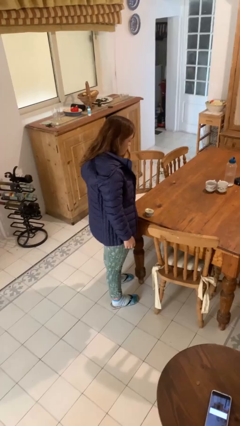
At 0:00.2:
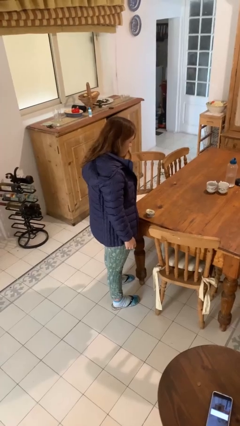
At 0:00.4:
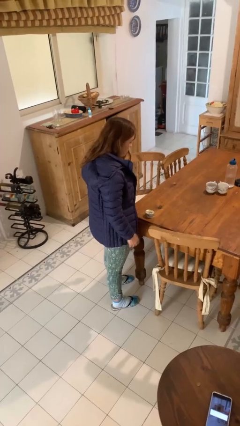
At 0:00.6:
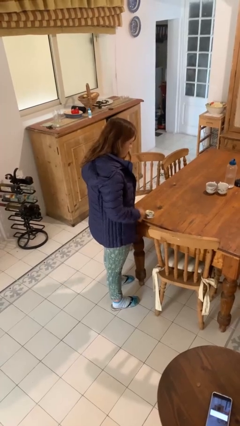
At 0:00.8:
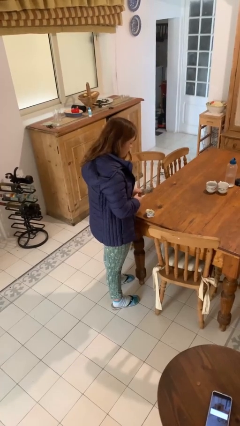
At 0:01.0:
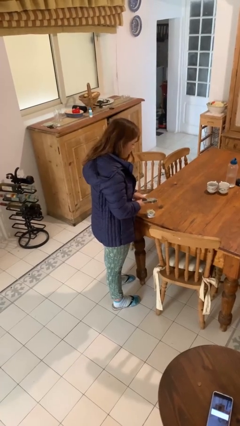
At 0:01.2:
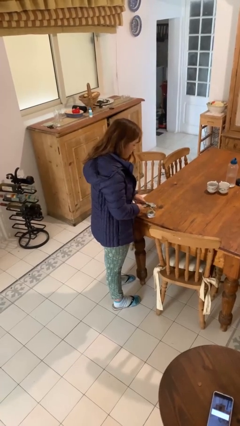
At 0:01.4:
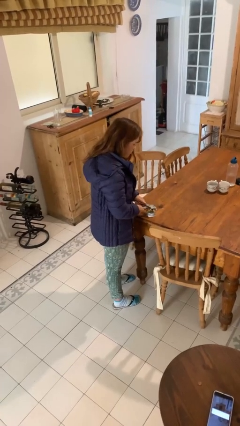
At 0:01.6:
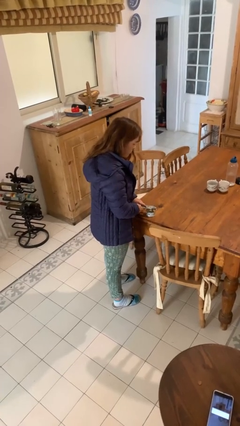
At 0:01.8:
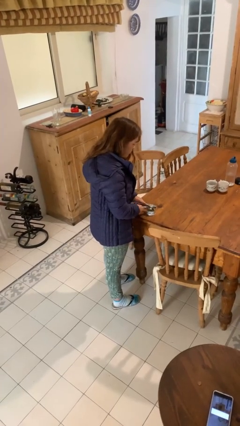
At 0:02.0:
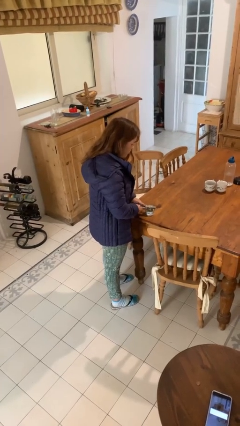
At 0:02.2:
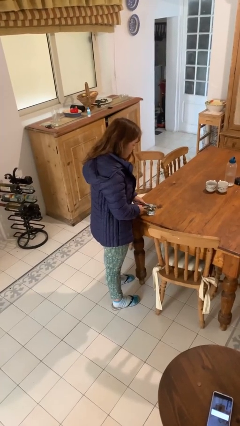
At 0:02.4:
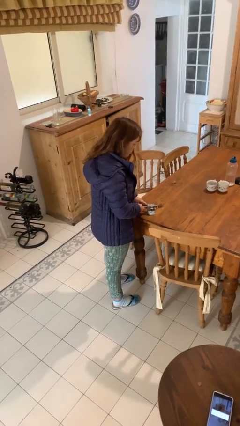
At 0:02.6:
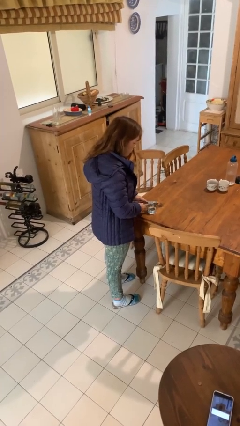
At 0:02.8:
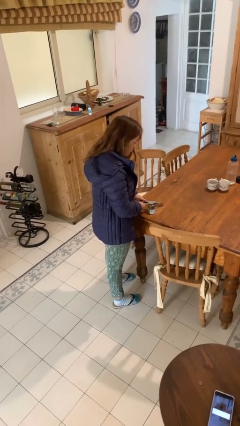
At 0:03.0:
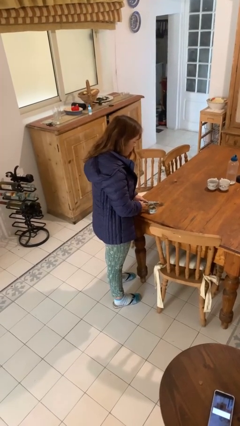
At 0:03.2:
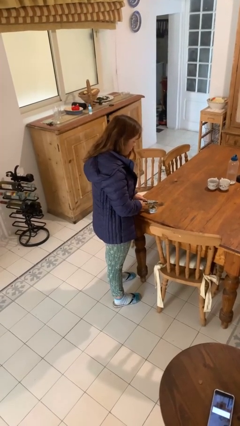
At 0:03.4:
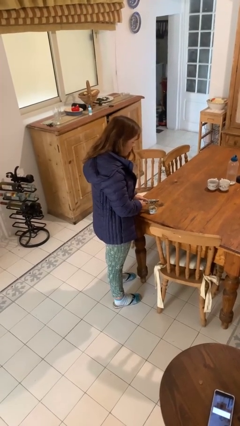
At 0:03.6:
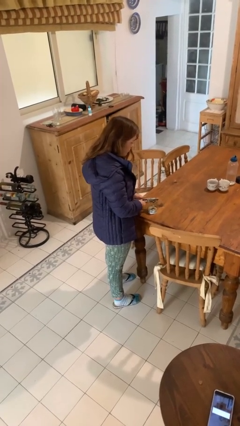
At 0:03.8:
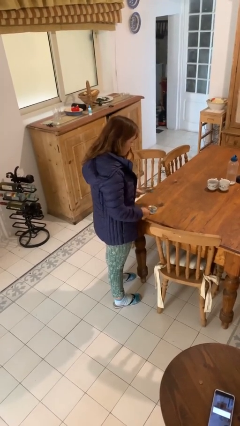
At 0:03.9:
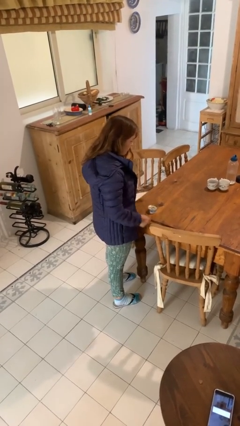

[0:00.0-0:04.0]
person opens can with can opener

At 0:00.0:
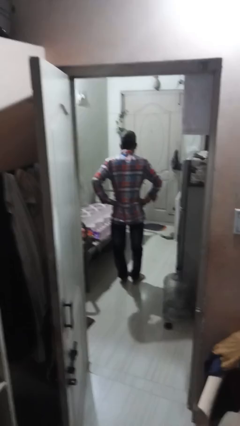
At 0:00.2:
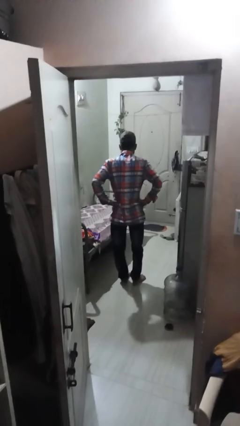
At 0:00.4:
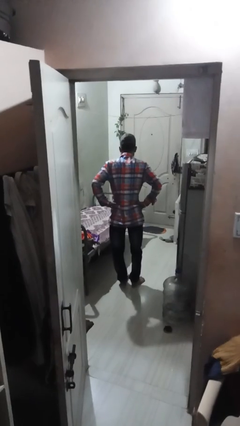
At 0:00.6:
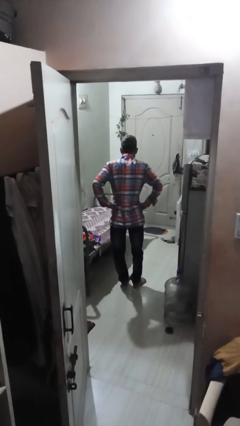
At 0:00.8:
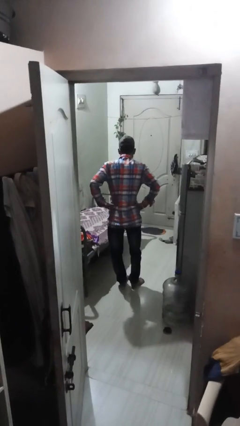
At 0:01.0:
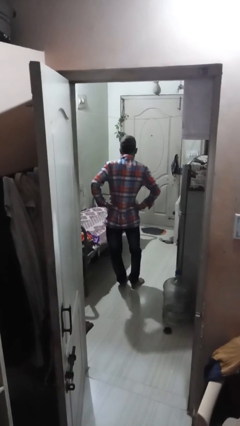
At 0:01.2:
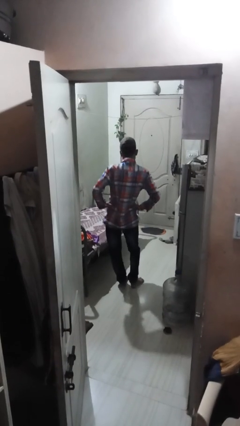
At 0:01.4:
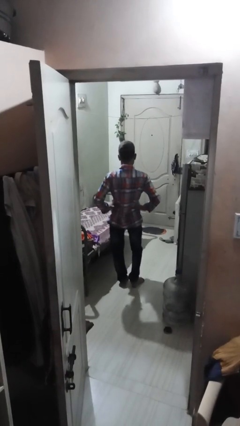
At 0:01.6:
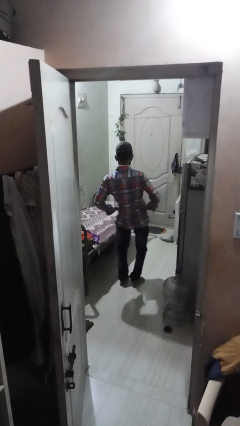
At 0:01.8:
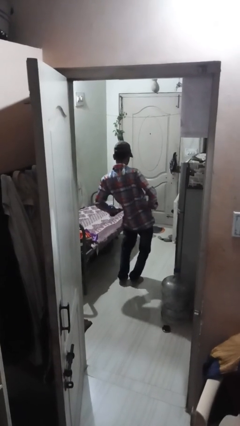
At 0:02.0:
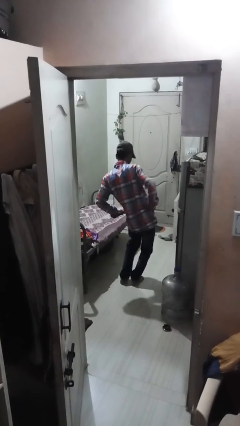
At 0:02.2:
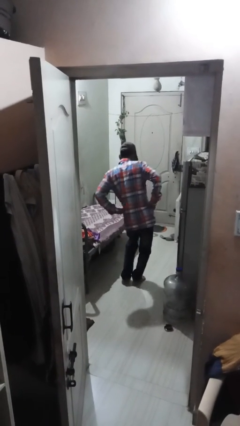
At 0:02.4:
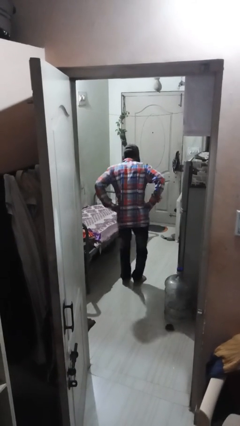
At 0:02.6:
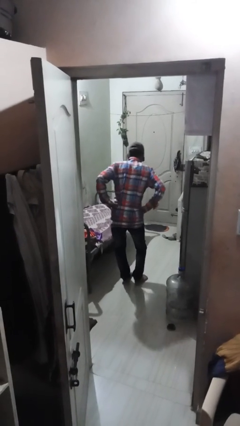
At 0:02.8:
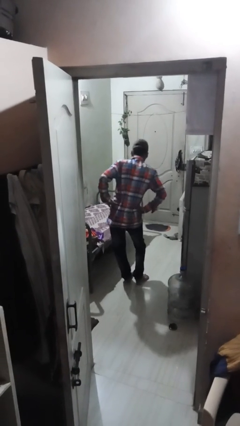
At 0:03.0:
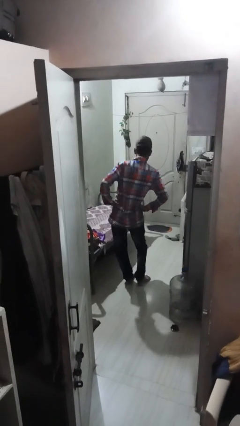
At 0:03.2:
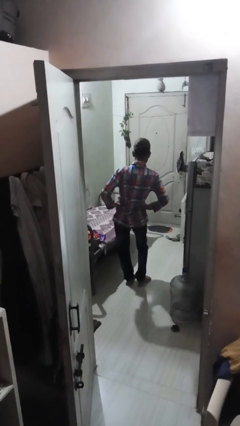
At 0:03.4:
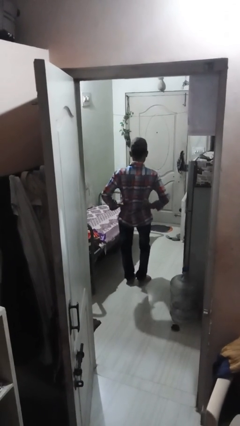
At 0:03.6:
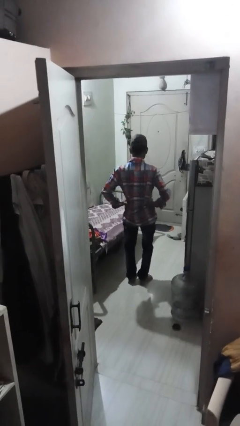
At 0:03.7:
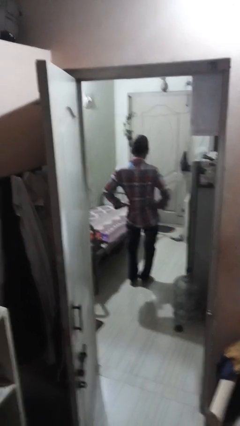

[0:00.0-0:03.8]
person wiggles hips

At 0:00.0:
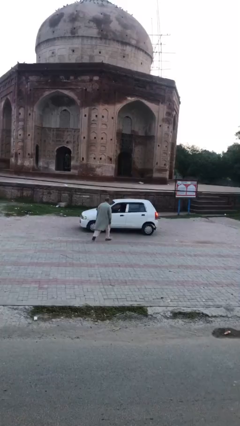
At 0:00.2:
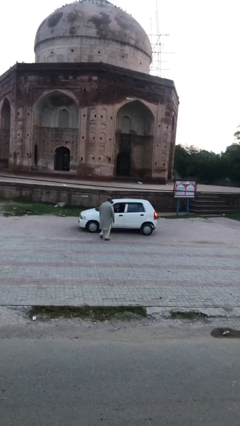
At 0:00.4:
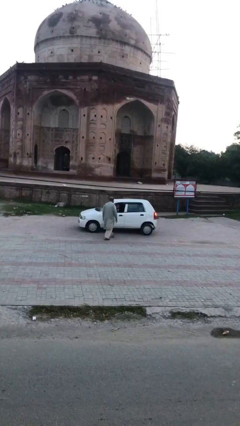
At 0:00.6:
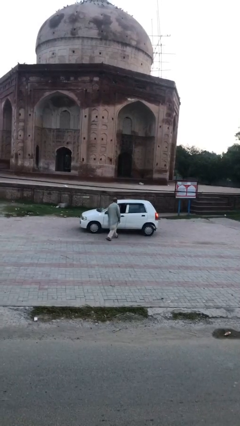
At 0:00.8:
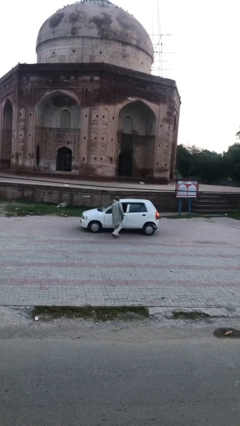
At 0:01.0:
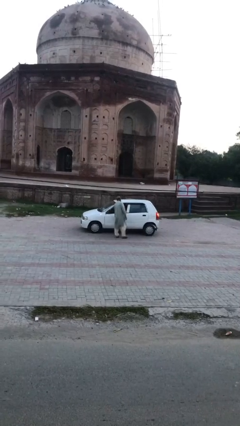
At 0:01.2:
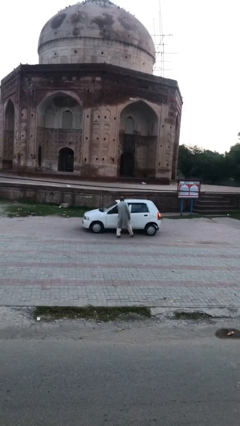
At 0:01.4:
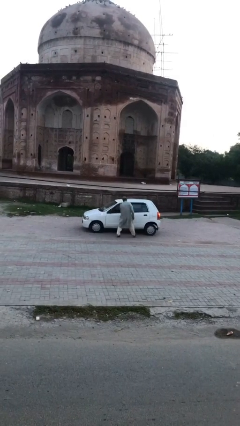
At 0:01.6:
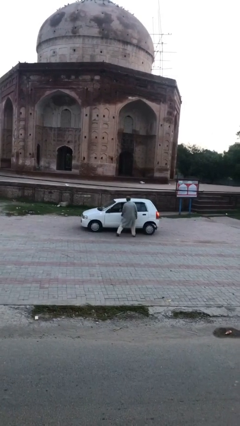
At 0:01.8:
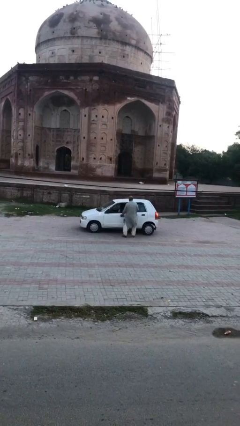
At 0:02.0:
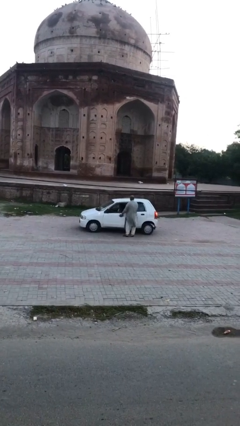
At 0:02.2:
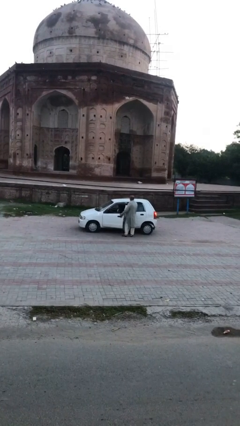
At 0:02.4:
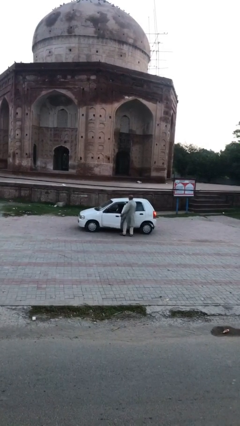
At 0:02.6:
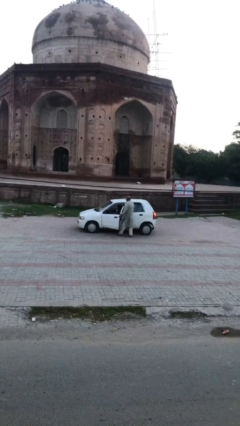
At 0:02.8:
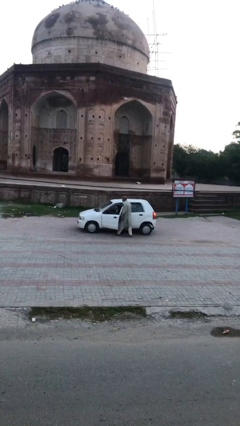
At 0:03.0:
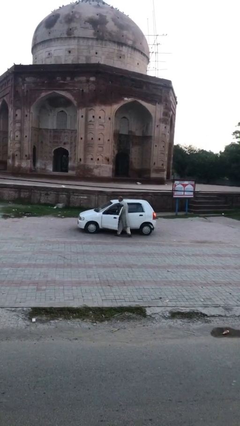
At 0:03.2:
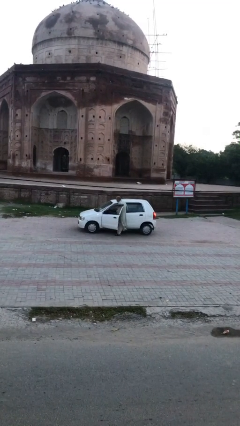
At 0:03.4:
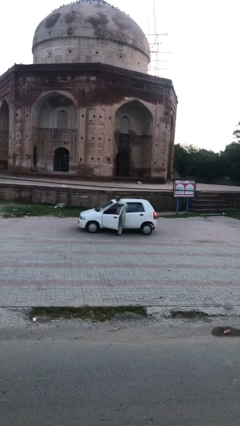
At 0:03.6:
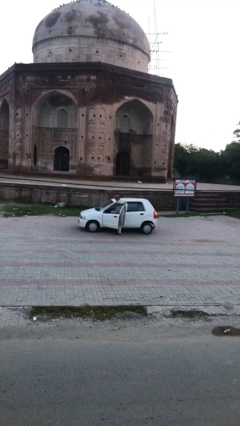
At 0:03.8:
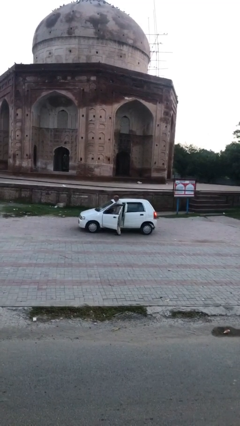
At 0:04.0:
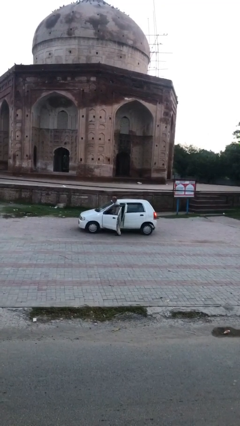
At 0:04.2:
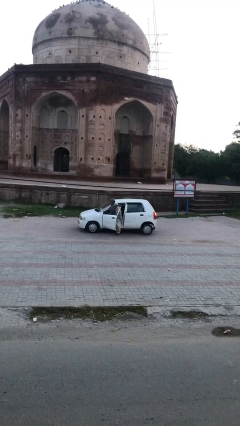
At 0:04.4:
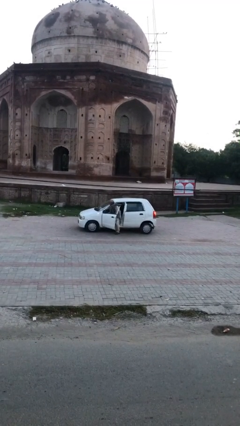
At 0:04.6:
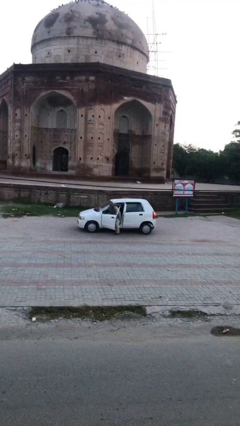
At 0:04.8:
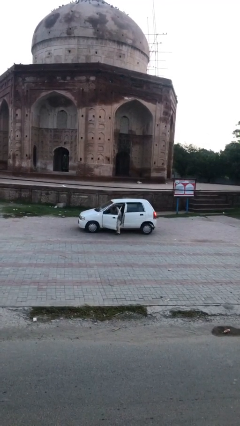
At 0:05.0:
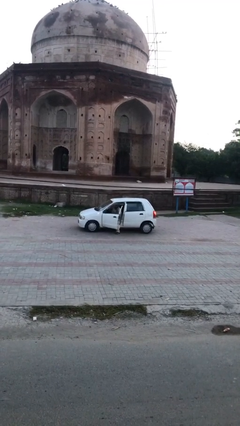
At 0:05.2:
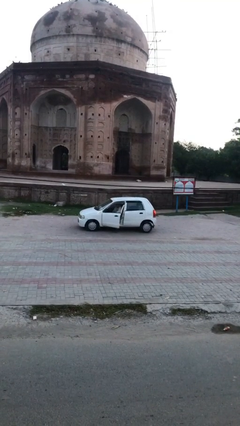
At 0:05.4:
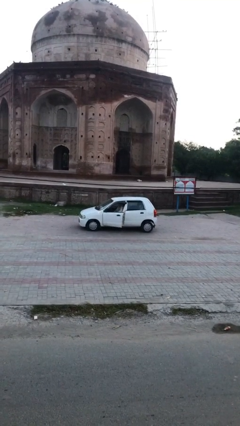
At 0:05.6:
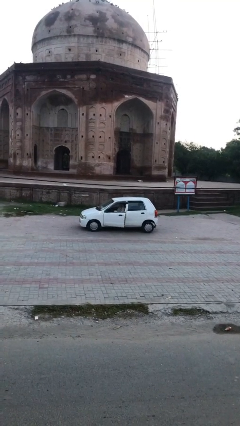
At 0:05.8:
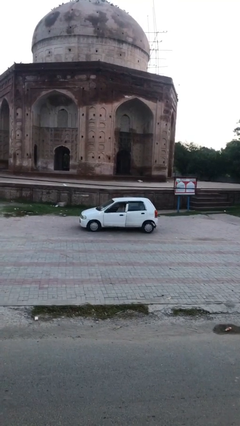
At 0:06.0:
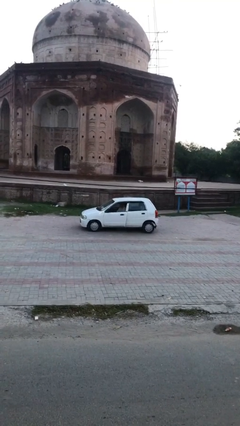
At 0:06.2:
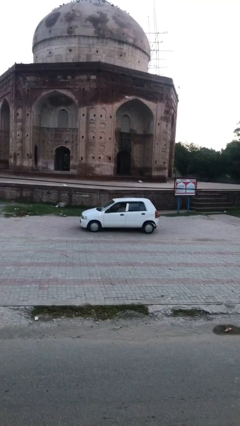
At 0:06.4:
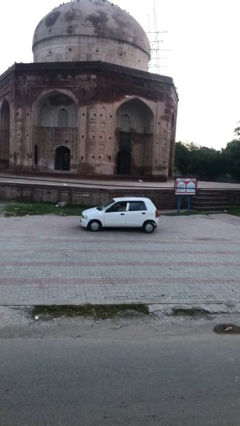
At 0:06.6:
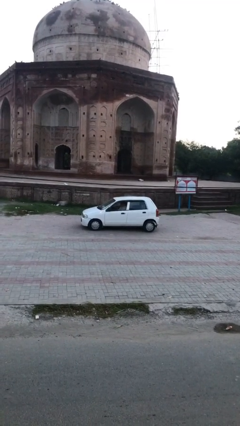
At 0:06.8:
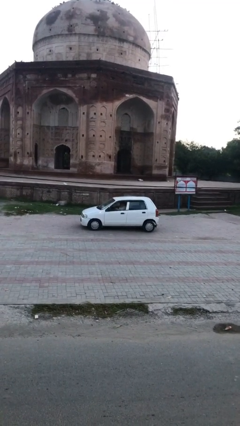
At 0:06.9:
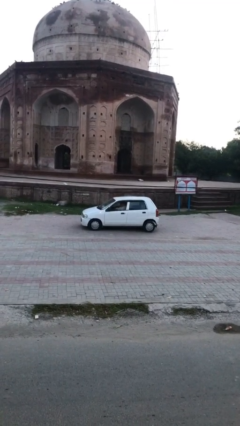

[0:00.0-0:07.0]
car picks up person

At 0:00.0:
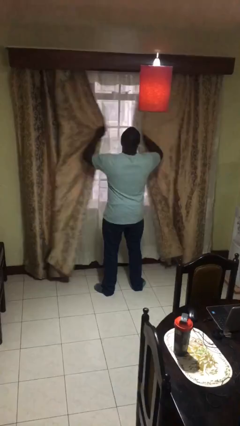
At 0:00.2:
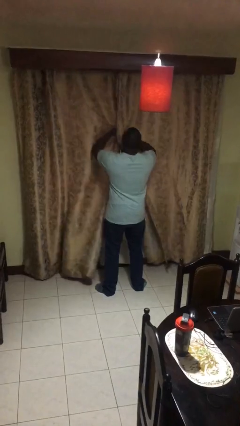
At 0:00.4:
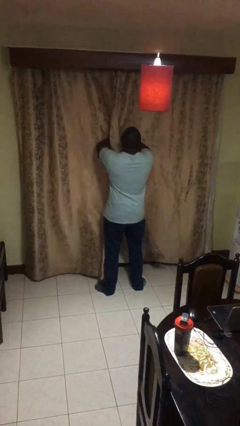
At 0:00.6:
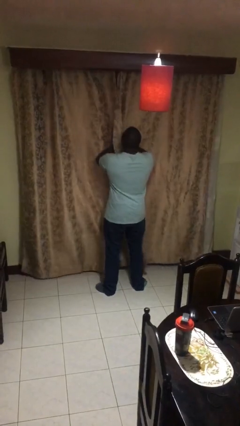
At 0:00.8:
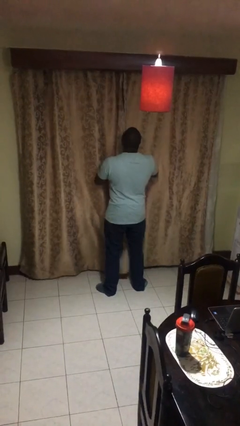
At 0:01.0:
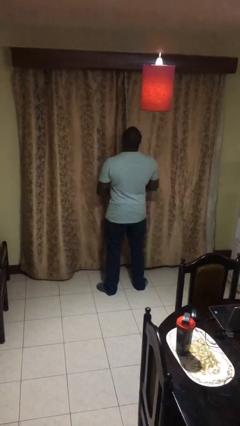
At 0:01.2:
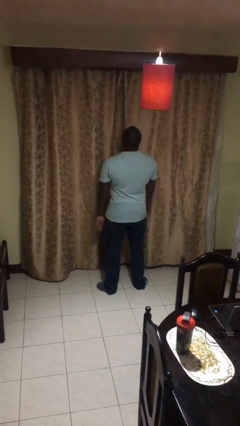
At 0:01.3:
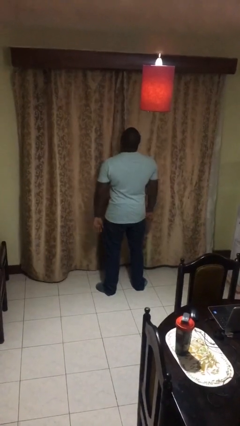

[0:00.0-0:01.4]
person closes curtains

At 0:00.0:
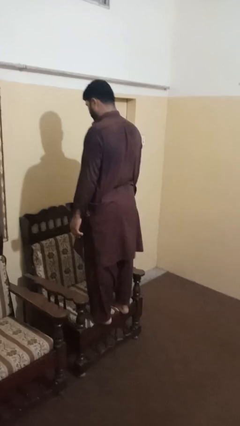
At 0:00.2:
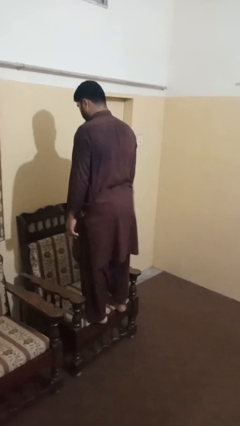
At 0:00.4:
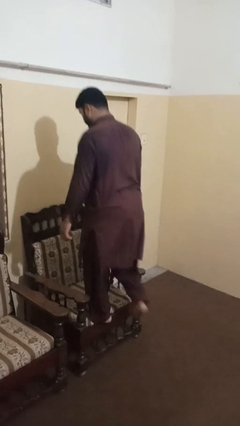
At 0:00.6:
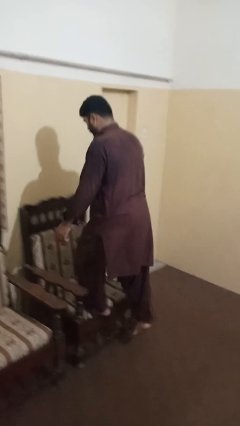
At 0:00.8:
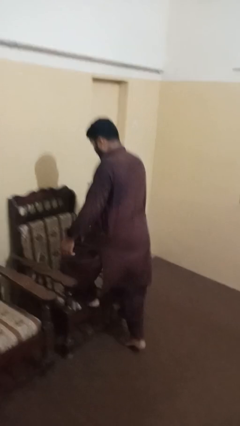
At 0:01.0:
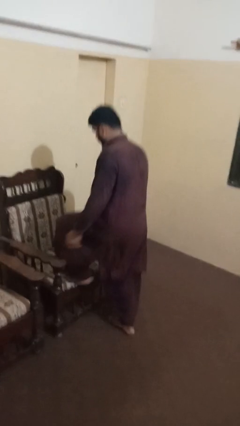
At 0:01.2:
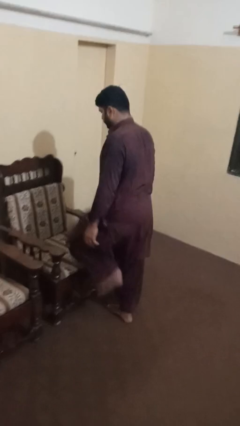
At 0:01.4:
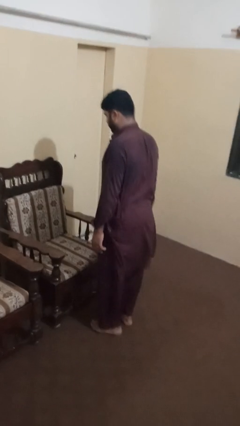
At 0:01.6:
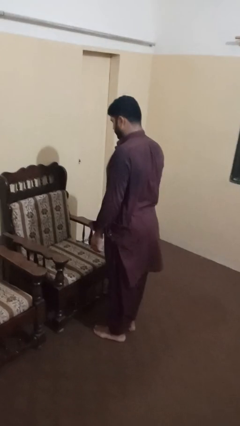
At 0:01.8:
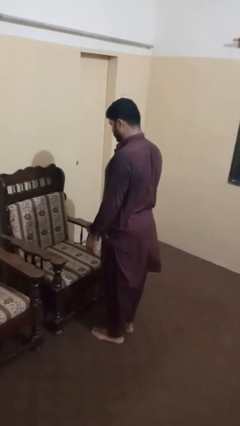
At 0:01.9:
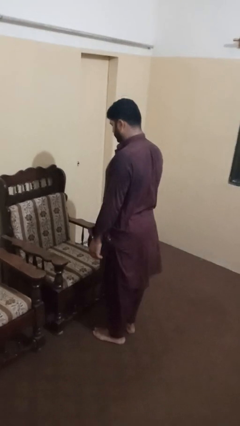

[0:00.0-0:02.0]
person climbs off chair
